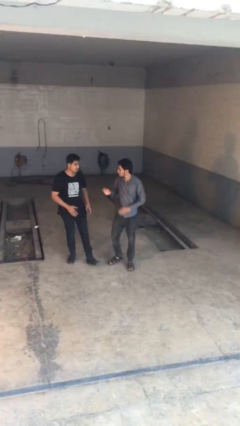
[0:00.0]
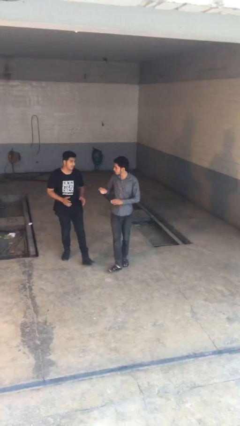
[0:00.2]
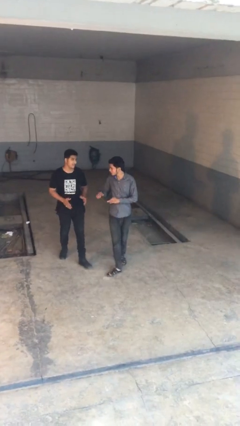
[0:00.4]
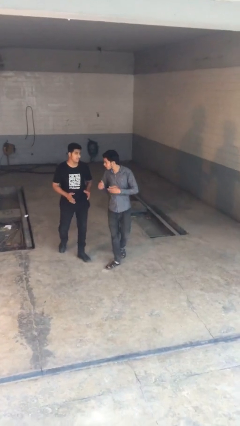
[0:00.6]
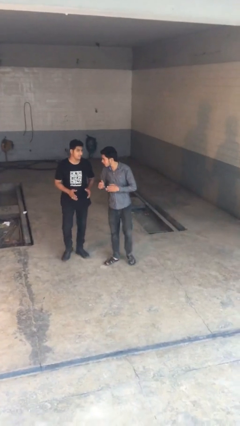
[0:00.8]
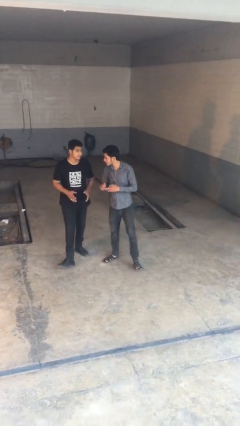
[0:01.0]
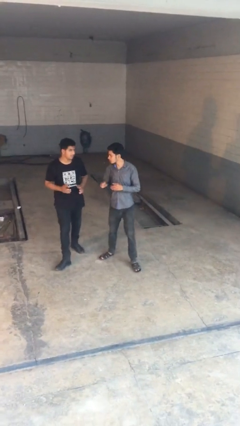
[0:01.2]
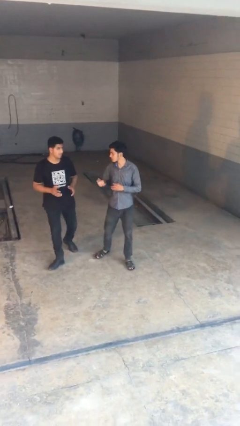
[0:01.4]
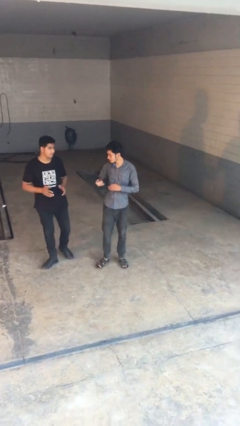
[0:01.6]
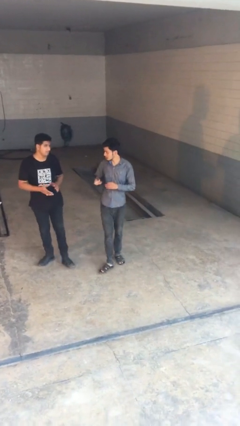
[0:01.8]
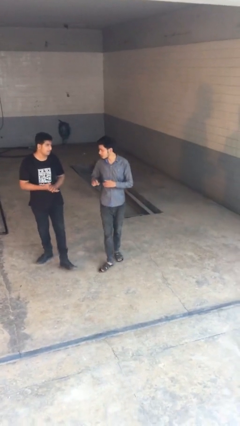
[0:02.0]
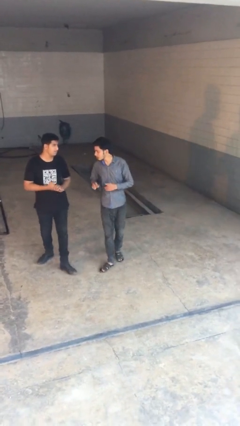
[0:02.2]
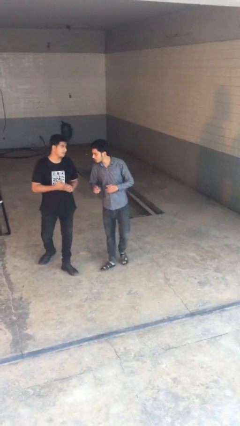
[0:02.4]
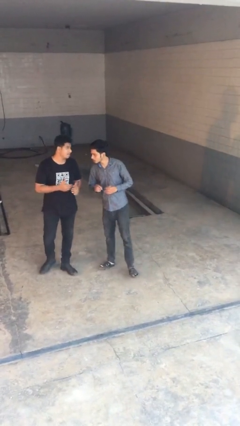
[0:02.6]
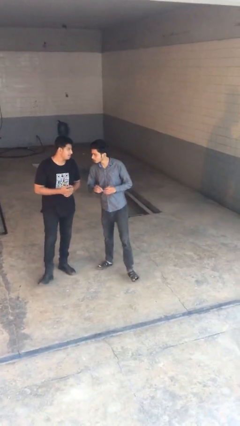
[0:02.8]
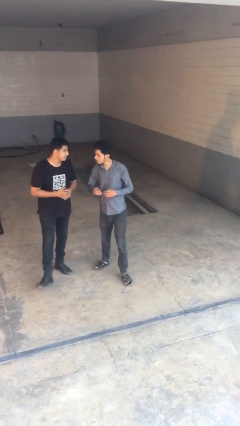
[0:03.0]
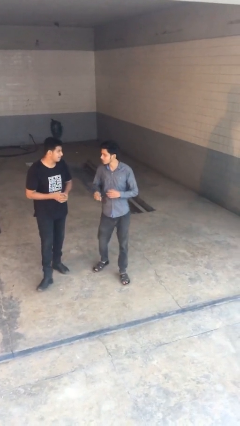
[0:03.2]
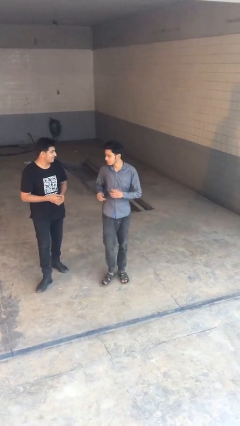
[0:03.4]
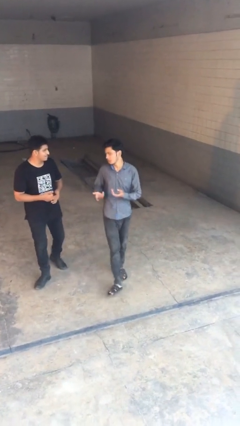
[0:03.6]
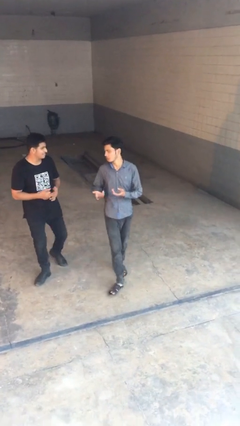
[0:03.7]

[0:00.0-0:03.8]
person talks to person

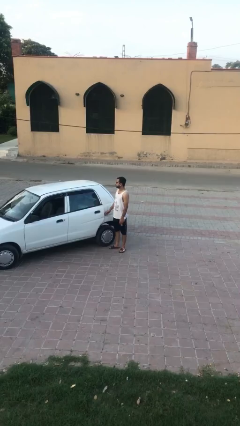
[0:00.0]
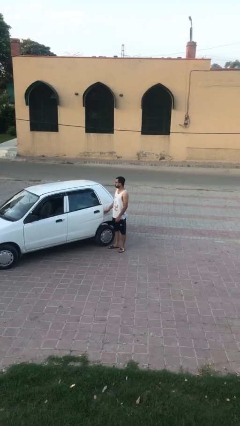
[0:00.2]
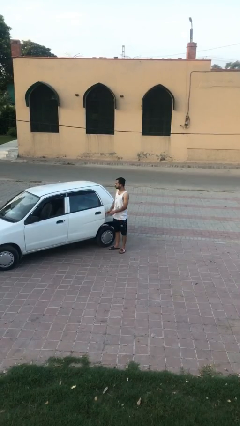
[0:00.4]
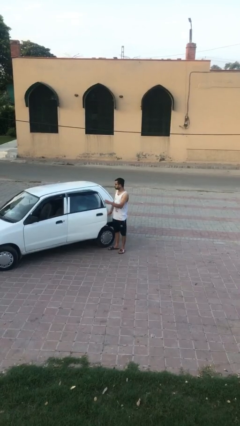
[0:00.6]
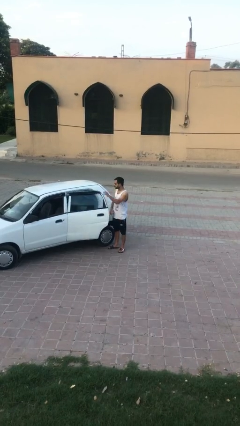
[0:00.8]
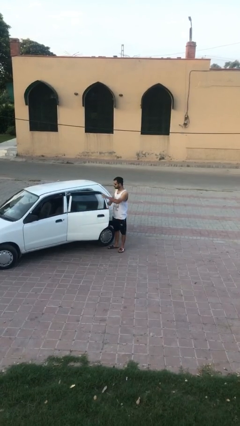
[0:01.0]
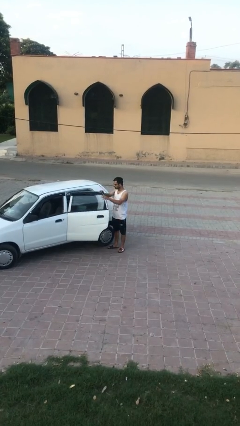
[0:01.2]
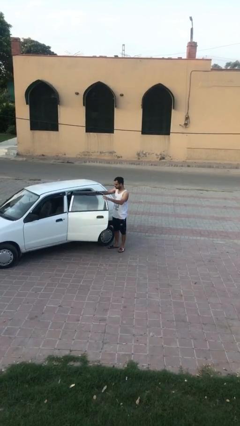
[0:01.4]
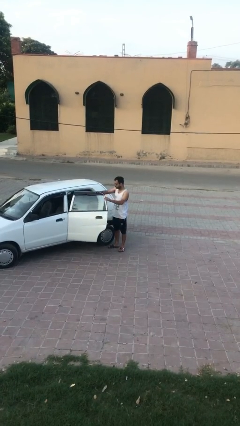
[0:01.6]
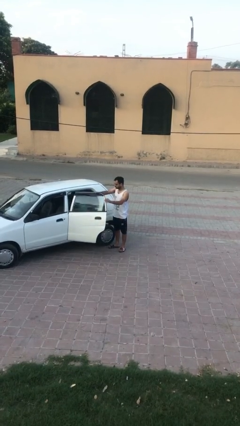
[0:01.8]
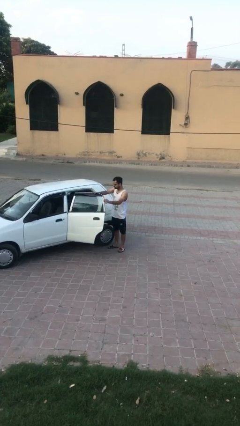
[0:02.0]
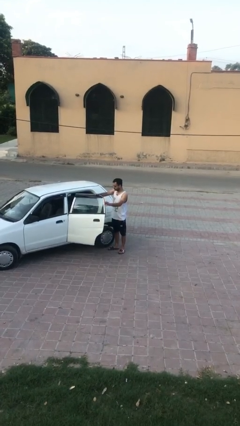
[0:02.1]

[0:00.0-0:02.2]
person opens car door

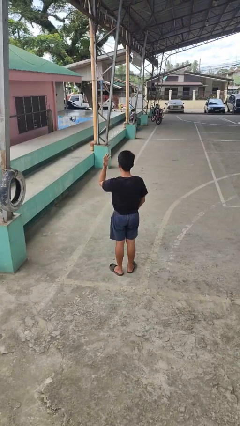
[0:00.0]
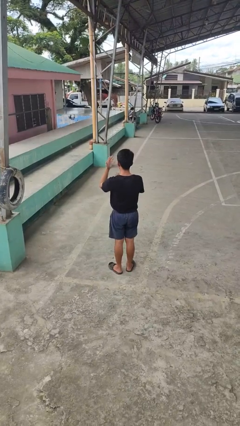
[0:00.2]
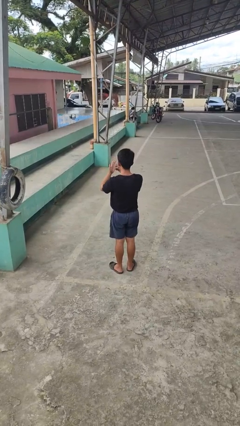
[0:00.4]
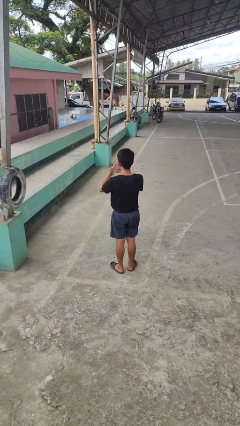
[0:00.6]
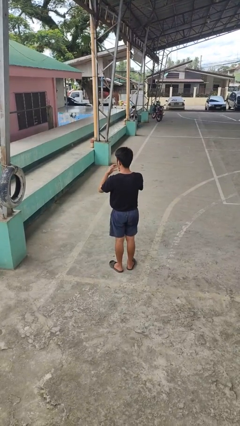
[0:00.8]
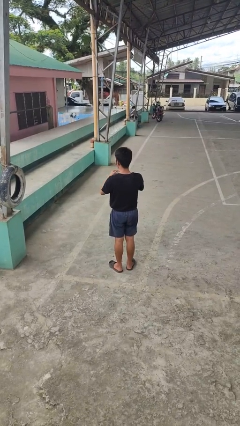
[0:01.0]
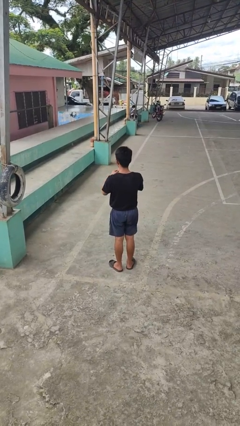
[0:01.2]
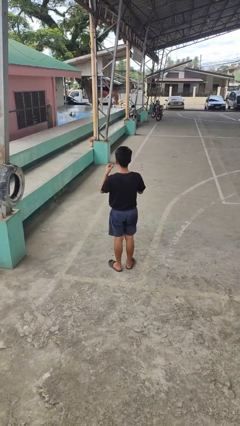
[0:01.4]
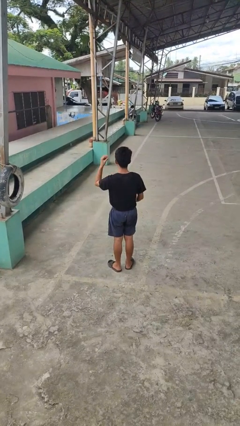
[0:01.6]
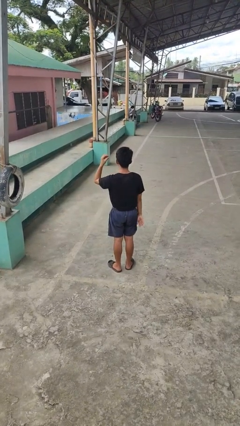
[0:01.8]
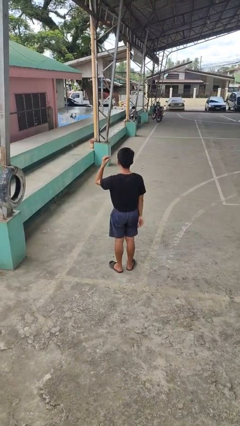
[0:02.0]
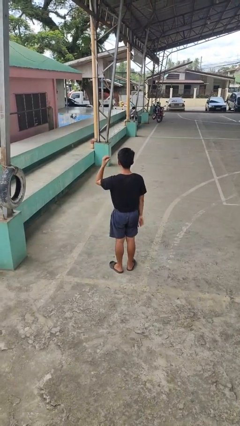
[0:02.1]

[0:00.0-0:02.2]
person takes off ring

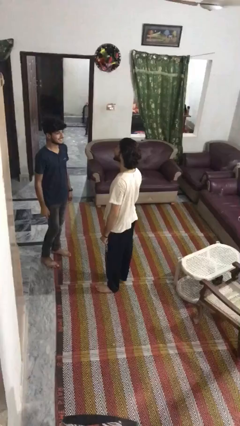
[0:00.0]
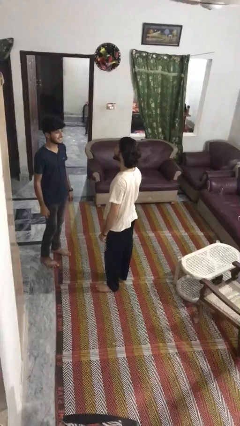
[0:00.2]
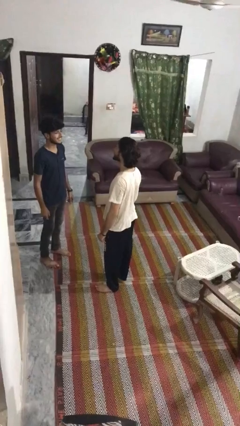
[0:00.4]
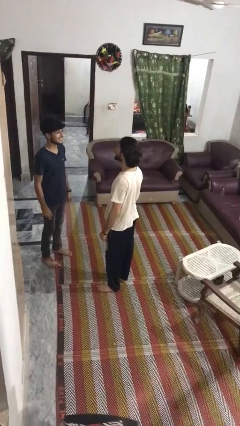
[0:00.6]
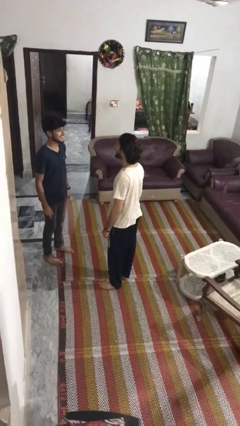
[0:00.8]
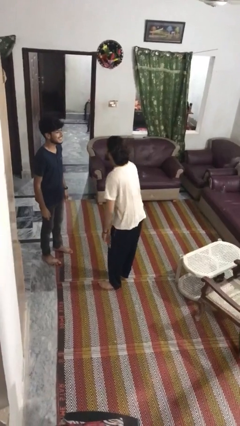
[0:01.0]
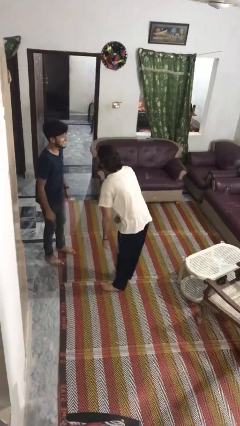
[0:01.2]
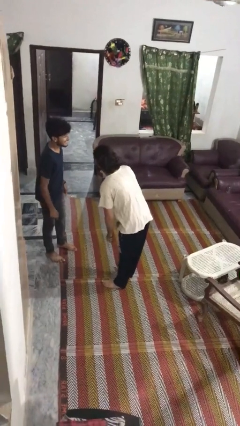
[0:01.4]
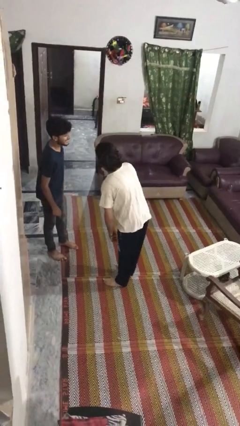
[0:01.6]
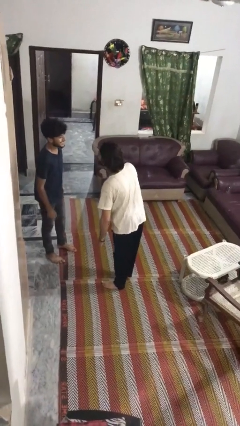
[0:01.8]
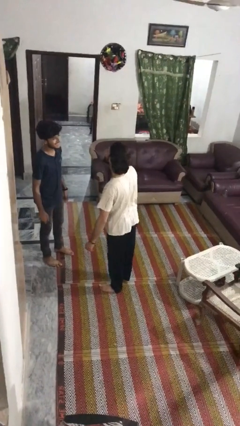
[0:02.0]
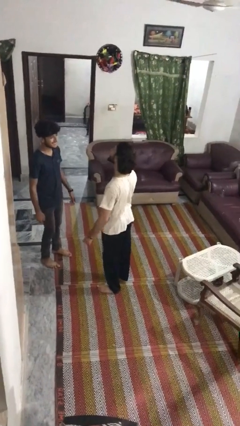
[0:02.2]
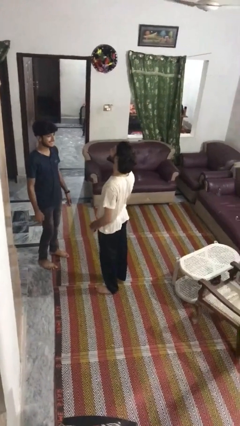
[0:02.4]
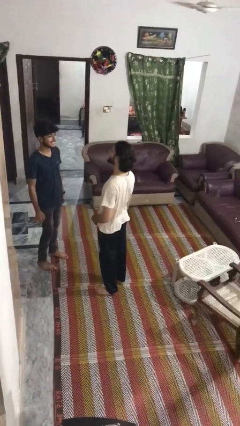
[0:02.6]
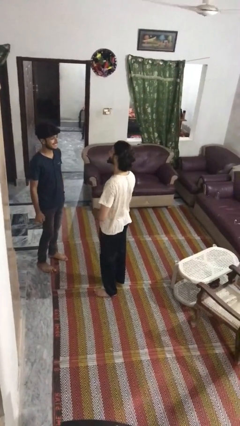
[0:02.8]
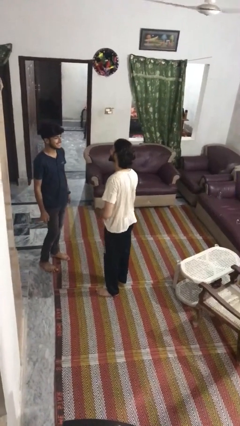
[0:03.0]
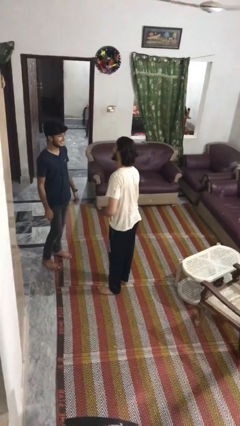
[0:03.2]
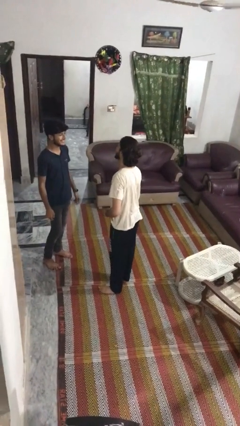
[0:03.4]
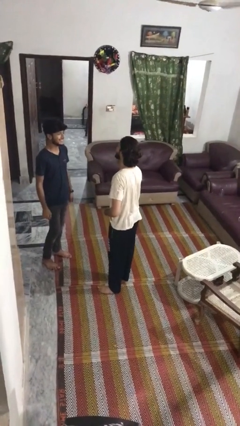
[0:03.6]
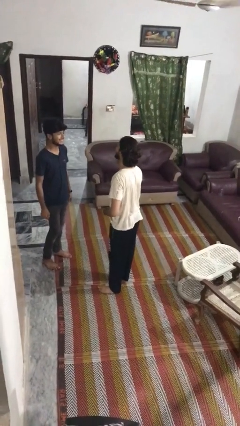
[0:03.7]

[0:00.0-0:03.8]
person laughs with person

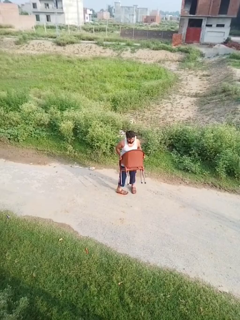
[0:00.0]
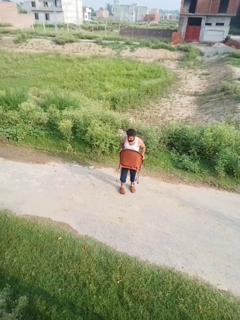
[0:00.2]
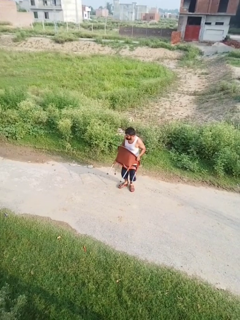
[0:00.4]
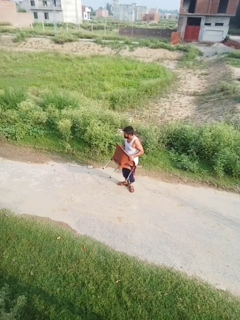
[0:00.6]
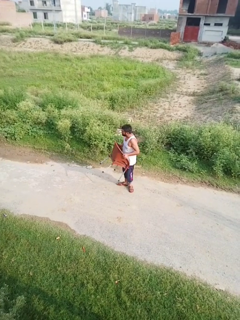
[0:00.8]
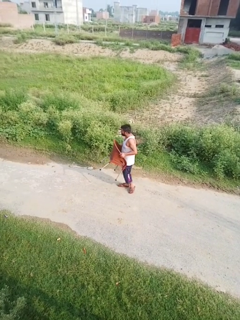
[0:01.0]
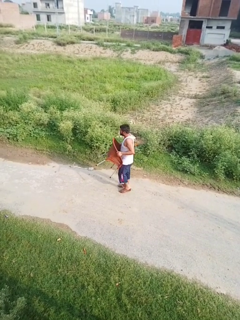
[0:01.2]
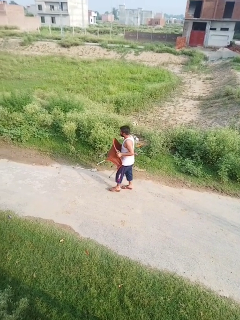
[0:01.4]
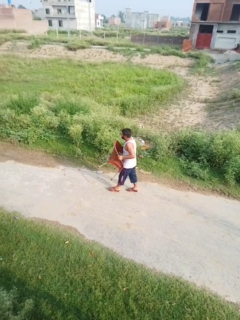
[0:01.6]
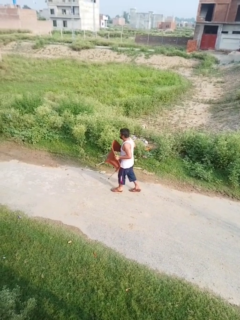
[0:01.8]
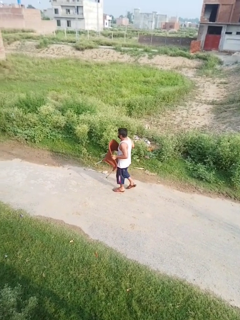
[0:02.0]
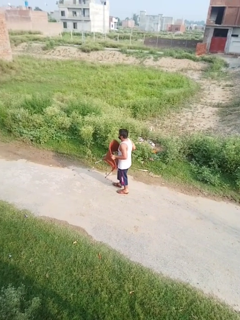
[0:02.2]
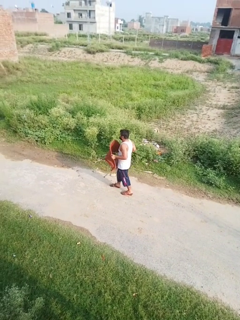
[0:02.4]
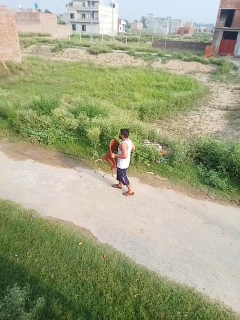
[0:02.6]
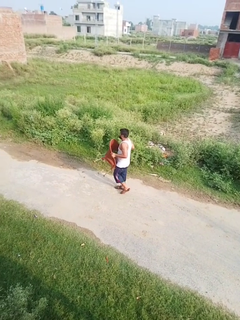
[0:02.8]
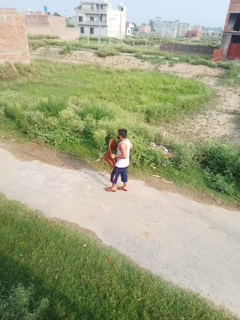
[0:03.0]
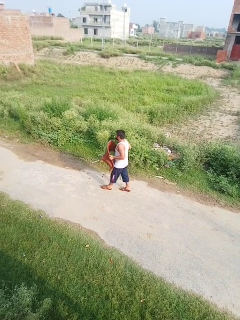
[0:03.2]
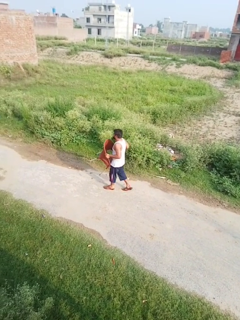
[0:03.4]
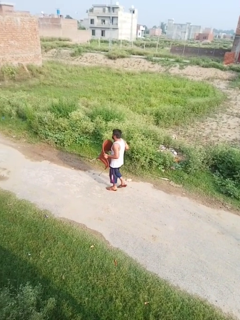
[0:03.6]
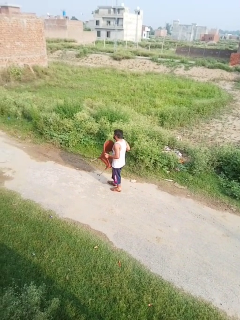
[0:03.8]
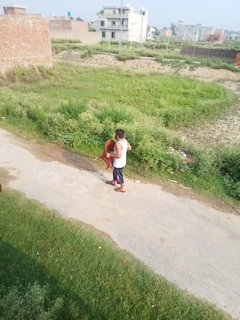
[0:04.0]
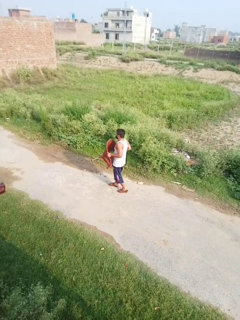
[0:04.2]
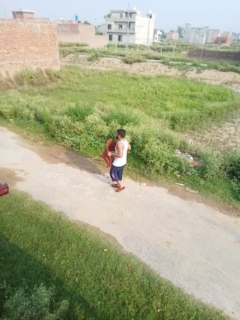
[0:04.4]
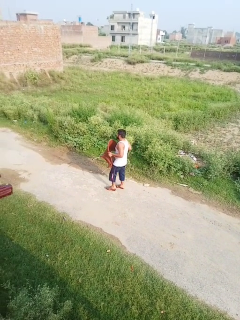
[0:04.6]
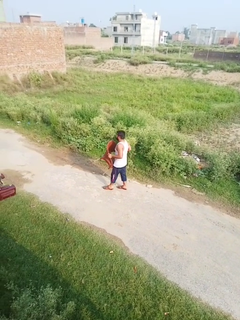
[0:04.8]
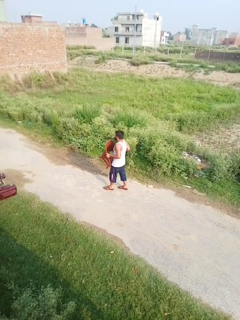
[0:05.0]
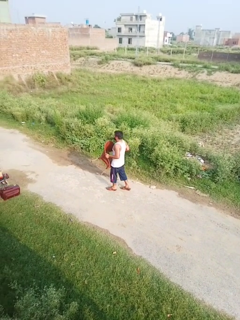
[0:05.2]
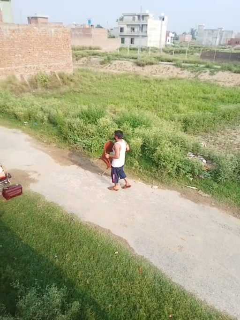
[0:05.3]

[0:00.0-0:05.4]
person carries furniture

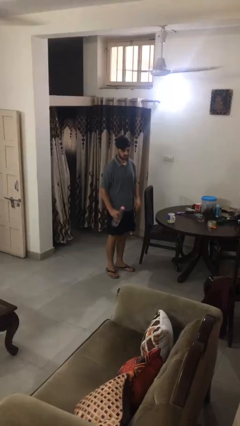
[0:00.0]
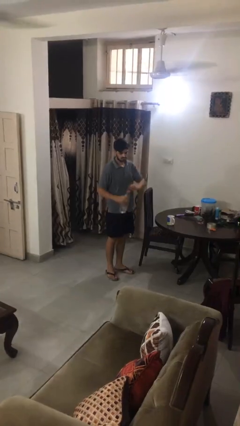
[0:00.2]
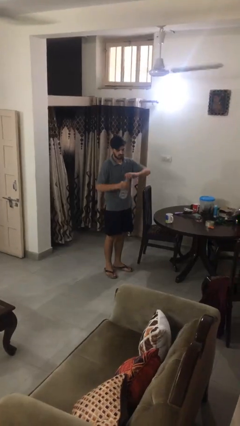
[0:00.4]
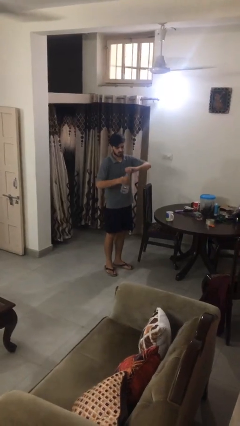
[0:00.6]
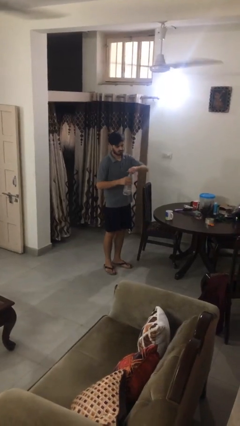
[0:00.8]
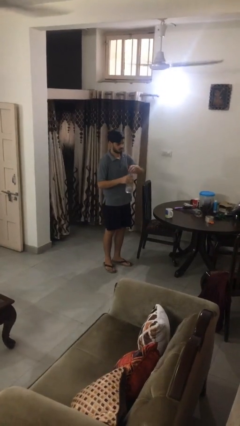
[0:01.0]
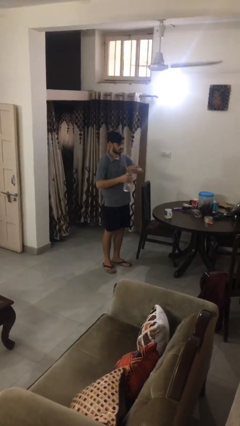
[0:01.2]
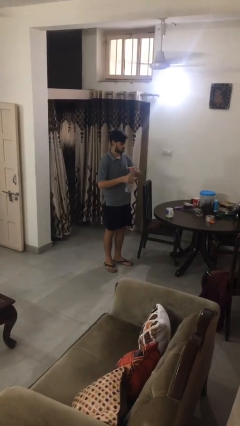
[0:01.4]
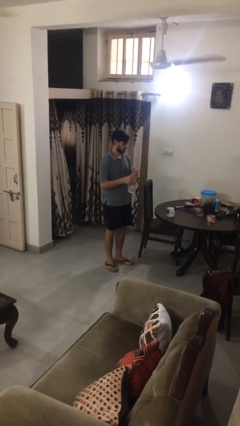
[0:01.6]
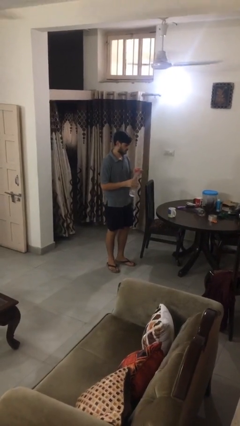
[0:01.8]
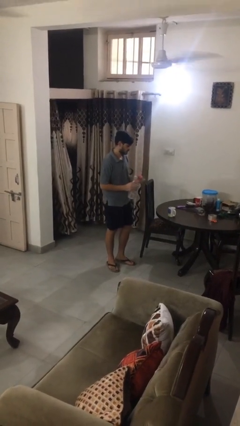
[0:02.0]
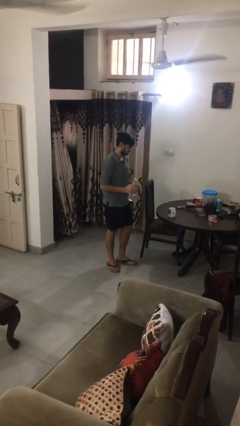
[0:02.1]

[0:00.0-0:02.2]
person unscrews lid from bottle
